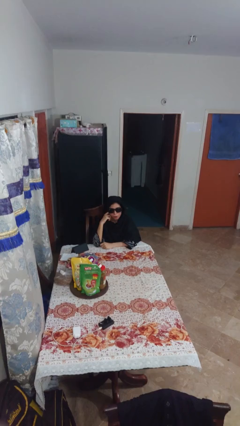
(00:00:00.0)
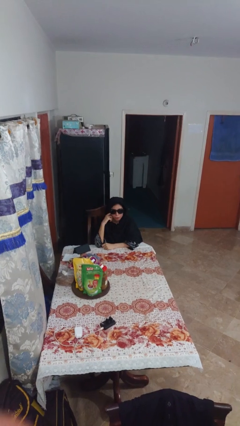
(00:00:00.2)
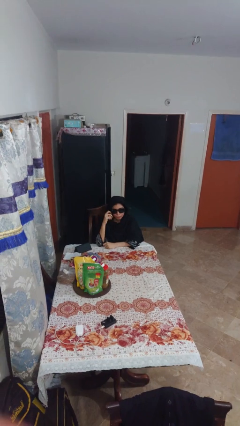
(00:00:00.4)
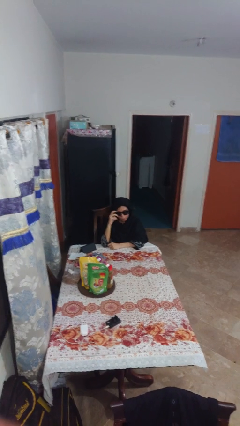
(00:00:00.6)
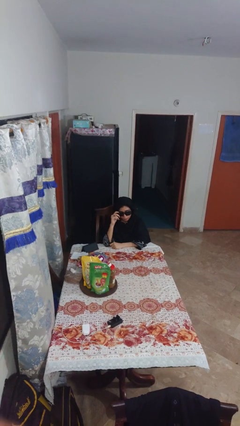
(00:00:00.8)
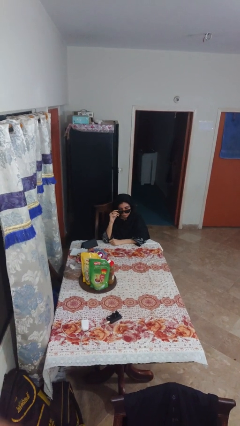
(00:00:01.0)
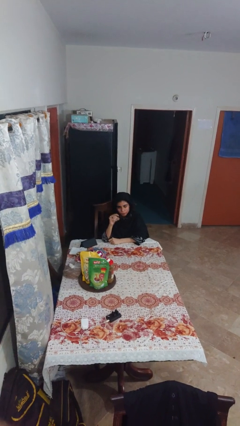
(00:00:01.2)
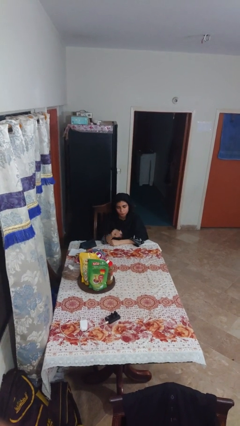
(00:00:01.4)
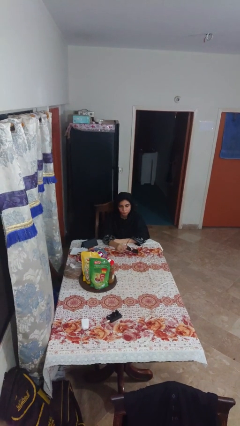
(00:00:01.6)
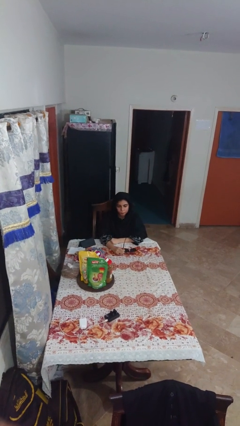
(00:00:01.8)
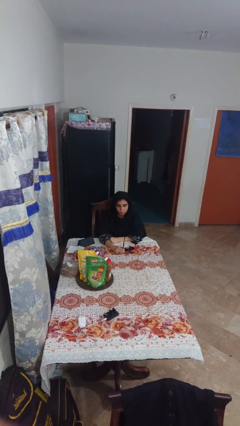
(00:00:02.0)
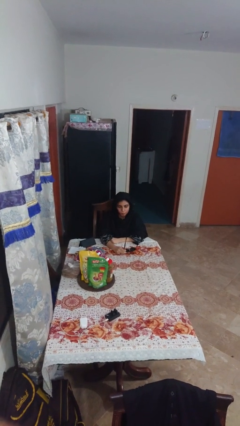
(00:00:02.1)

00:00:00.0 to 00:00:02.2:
person takes off sunglasses

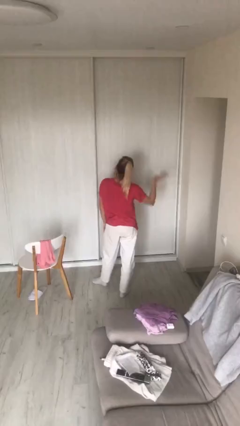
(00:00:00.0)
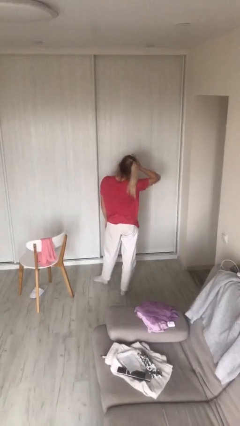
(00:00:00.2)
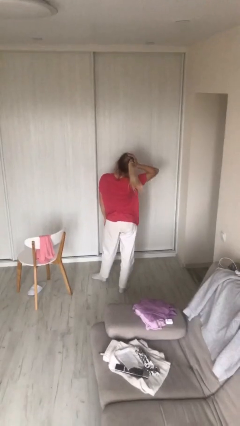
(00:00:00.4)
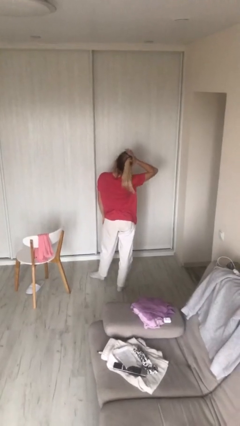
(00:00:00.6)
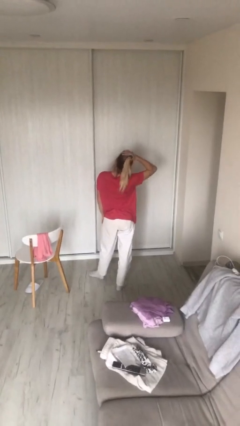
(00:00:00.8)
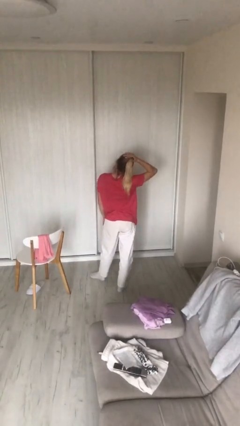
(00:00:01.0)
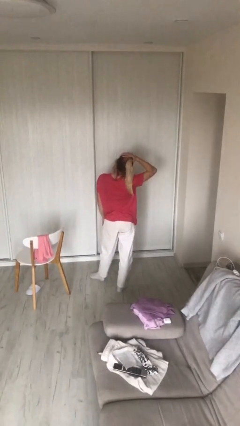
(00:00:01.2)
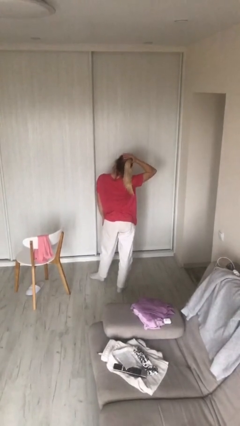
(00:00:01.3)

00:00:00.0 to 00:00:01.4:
person pats head

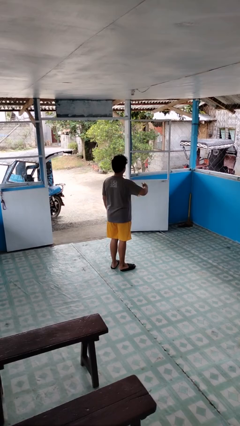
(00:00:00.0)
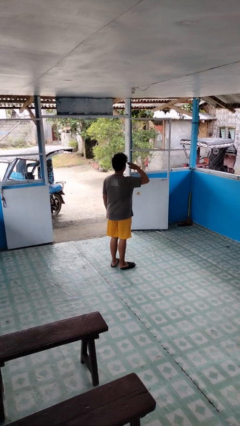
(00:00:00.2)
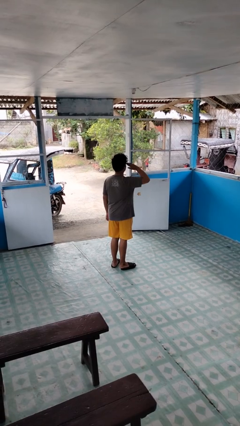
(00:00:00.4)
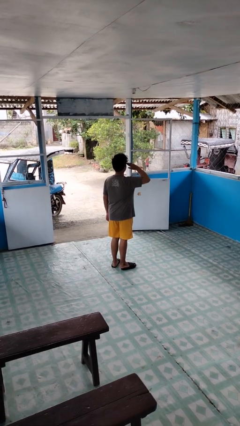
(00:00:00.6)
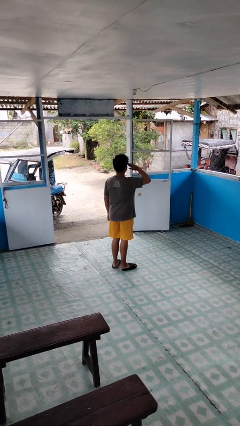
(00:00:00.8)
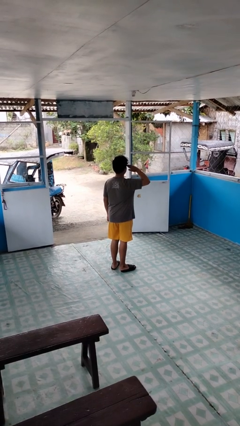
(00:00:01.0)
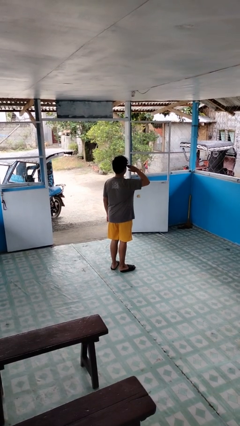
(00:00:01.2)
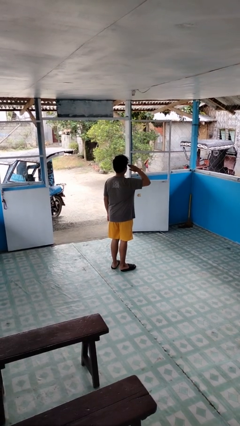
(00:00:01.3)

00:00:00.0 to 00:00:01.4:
person salutes

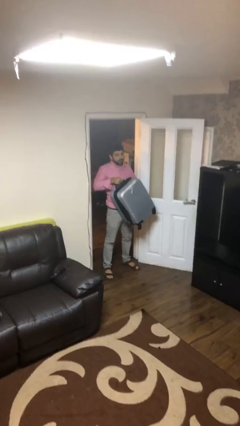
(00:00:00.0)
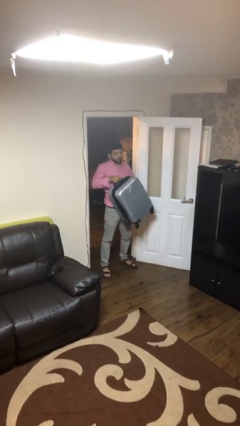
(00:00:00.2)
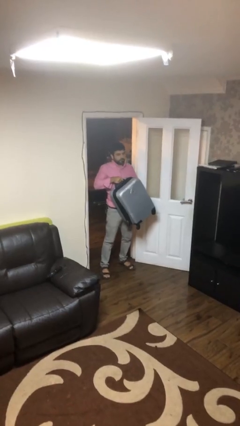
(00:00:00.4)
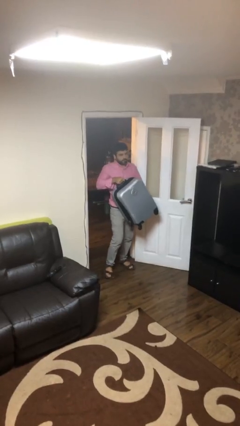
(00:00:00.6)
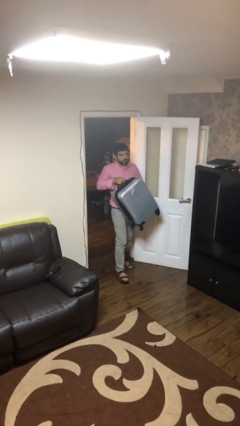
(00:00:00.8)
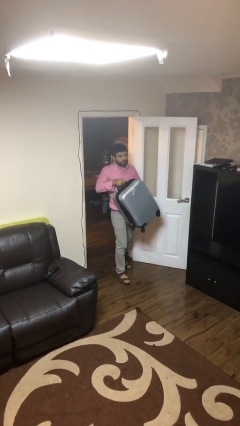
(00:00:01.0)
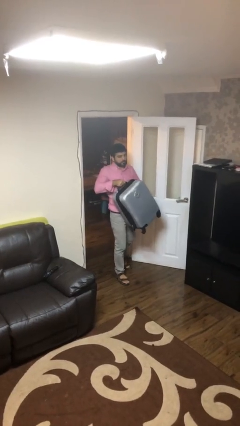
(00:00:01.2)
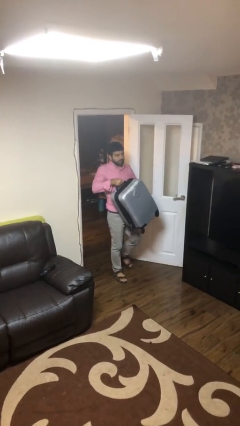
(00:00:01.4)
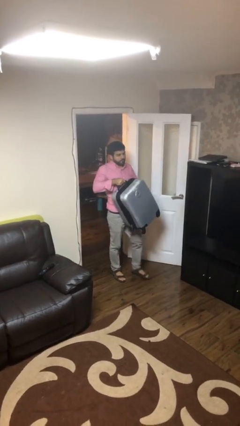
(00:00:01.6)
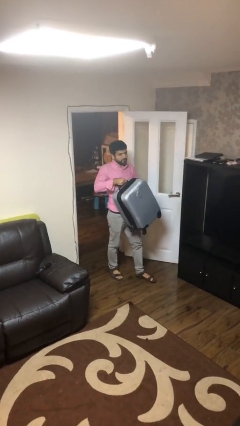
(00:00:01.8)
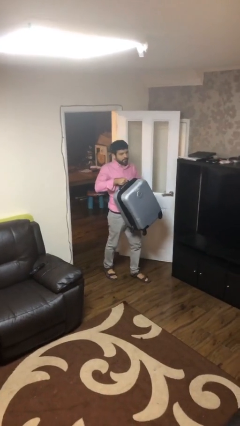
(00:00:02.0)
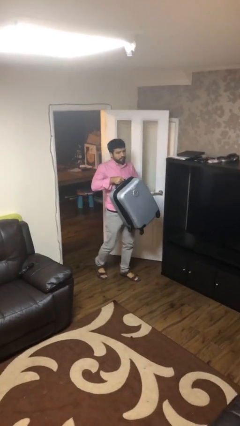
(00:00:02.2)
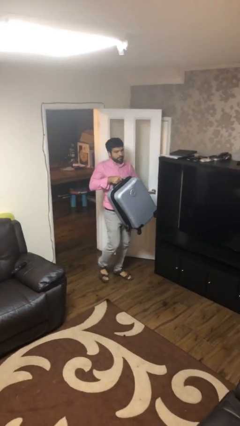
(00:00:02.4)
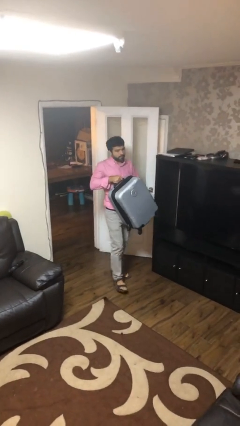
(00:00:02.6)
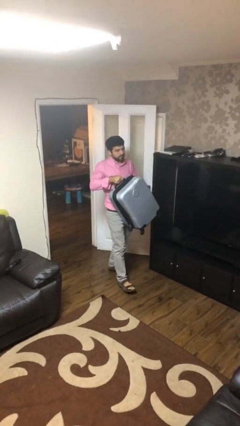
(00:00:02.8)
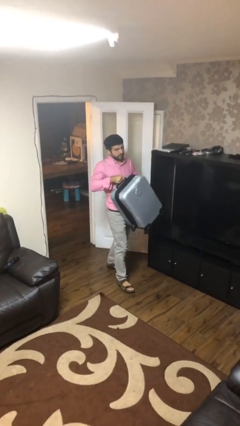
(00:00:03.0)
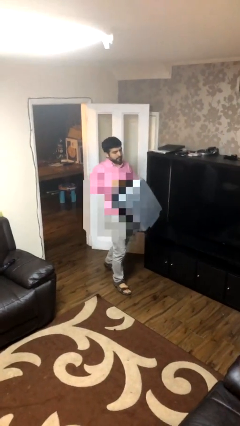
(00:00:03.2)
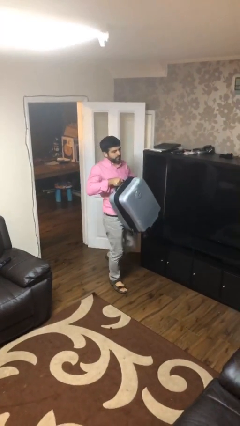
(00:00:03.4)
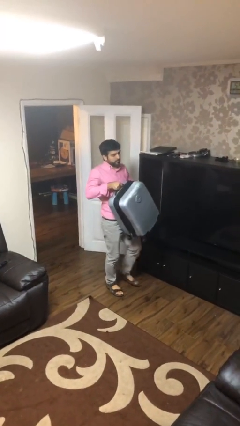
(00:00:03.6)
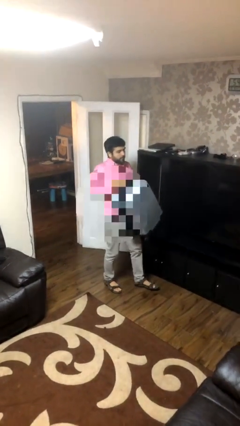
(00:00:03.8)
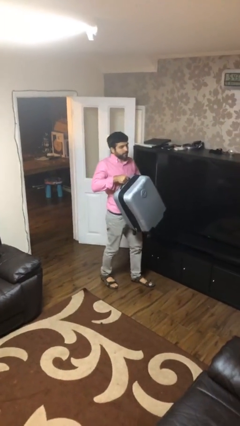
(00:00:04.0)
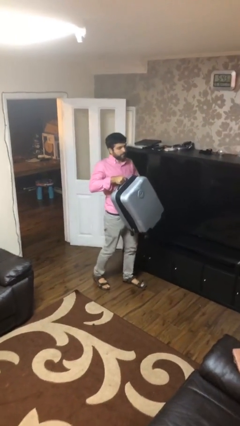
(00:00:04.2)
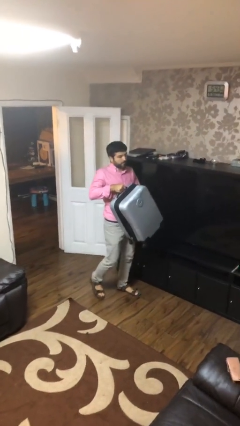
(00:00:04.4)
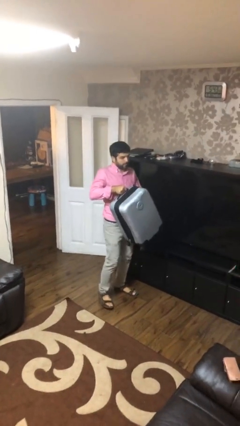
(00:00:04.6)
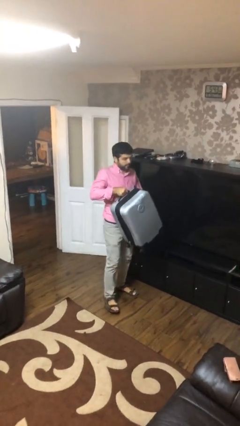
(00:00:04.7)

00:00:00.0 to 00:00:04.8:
person carries heavy object

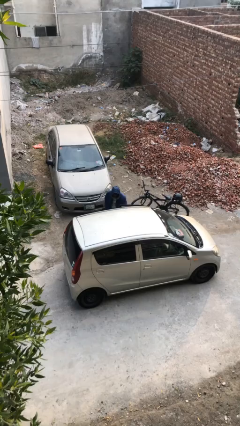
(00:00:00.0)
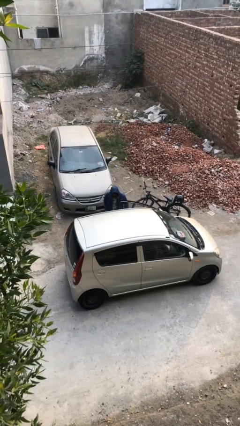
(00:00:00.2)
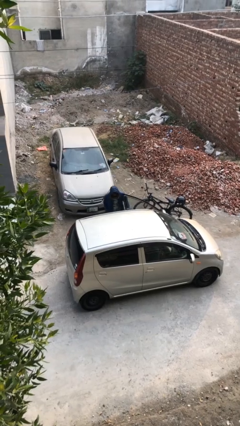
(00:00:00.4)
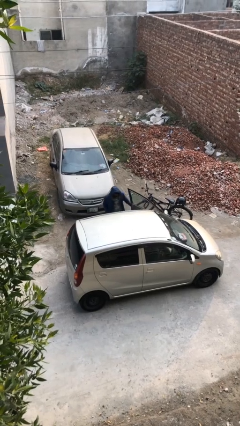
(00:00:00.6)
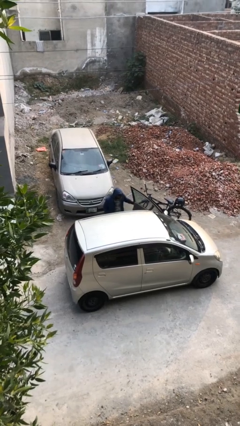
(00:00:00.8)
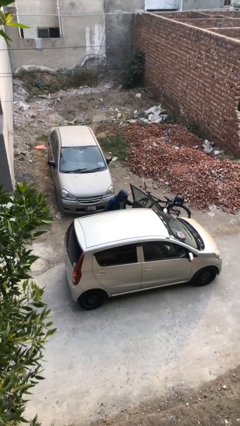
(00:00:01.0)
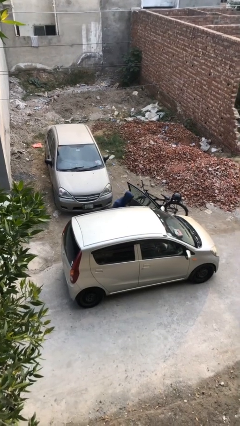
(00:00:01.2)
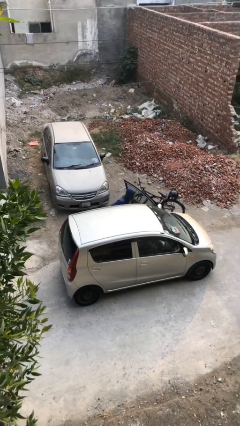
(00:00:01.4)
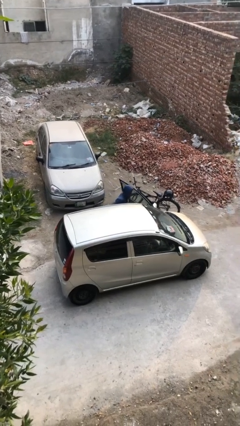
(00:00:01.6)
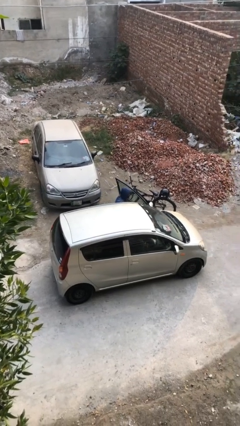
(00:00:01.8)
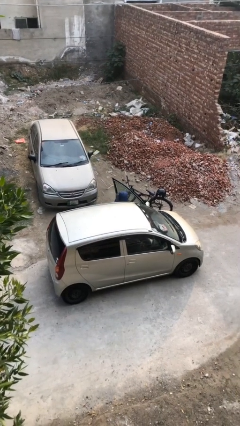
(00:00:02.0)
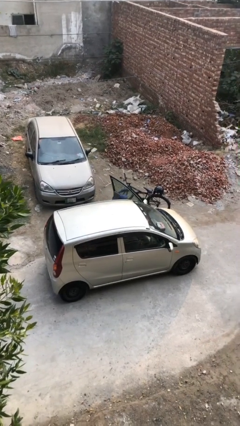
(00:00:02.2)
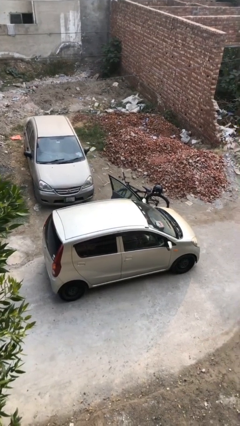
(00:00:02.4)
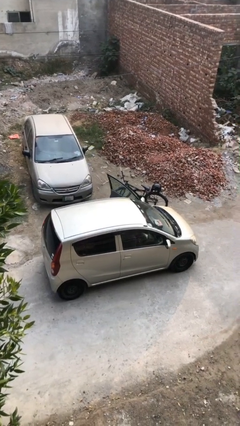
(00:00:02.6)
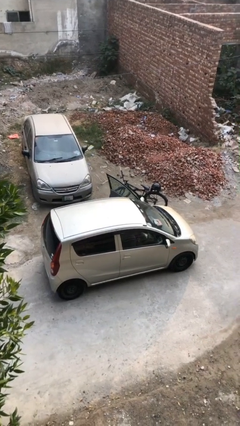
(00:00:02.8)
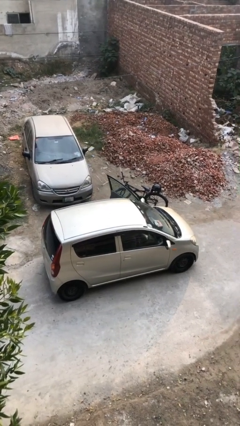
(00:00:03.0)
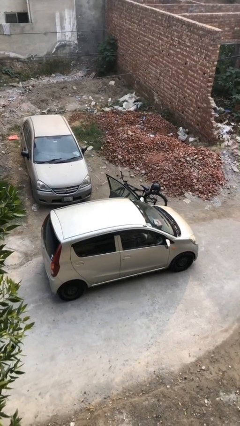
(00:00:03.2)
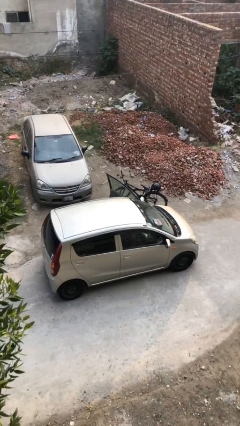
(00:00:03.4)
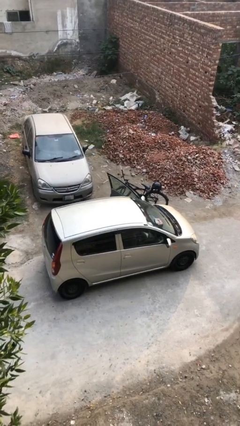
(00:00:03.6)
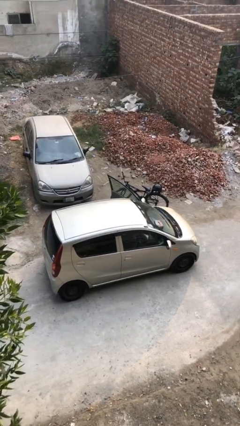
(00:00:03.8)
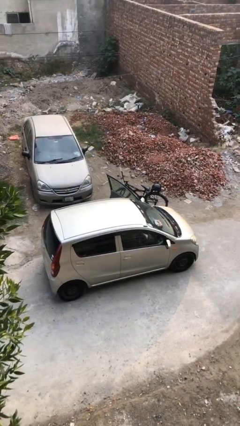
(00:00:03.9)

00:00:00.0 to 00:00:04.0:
person enters car

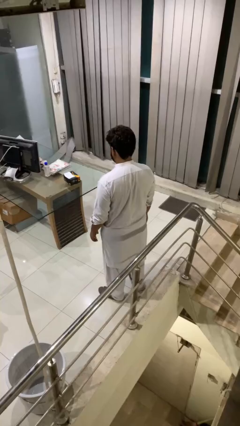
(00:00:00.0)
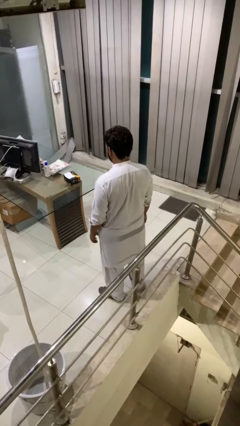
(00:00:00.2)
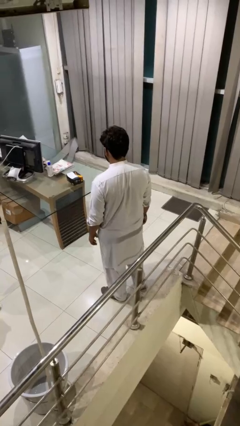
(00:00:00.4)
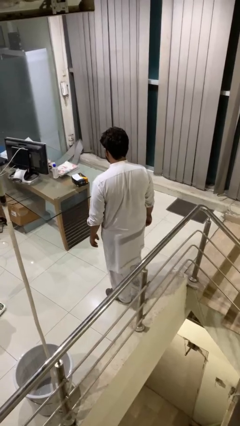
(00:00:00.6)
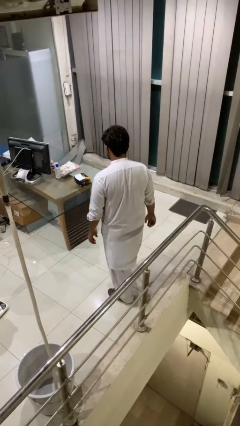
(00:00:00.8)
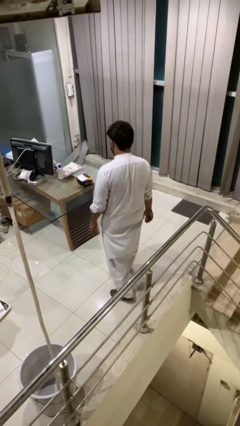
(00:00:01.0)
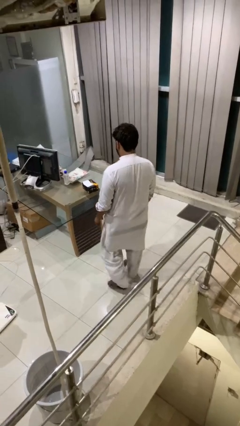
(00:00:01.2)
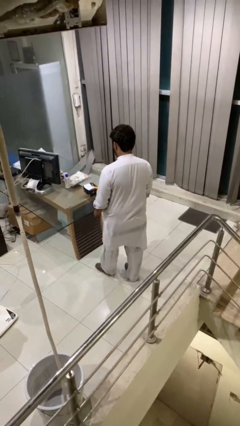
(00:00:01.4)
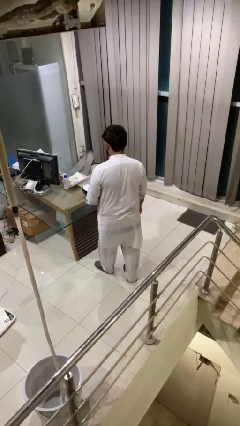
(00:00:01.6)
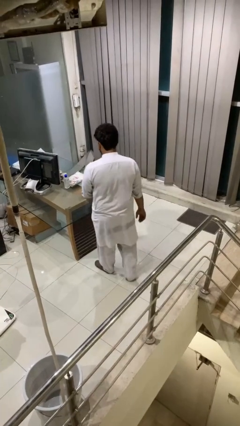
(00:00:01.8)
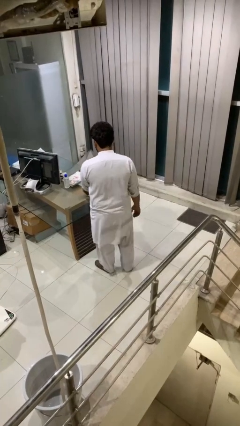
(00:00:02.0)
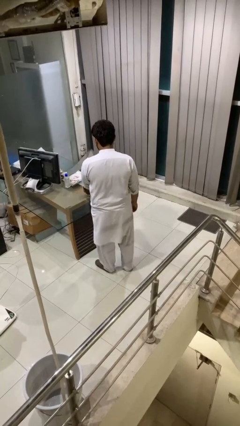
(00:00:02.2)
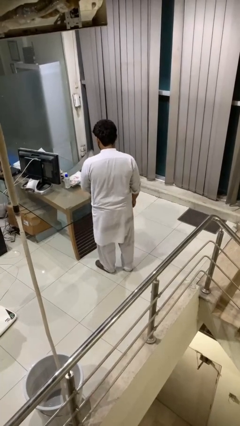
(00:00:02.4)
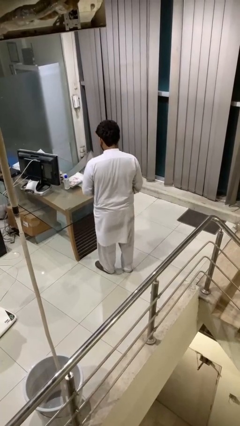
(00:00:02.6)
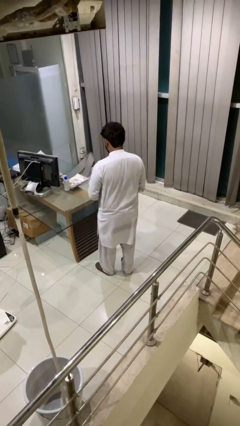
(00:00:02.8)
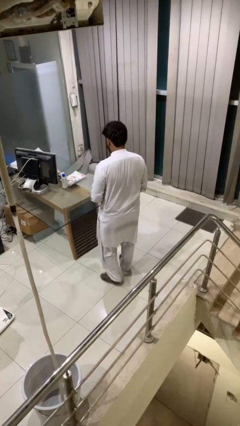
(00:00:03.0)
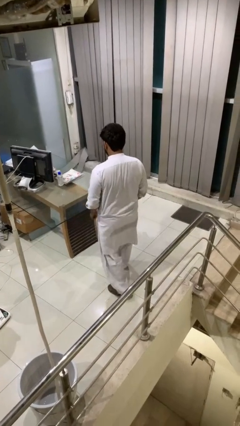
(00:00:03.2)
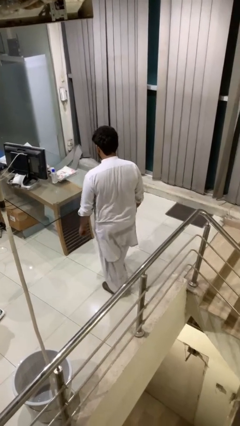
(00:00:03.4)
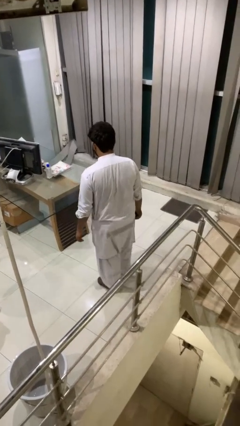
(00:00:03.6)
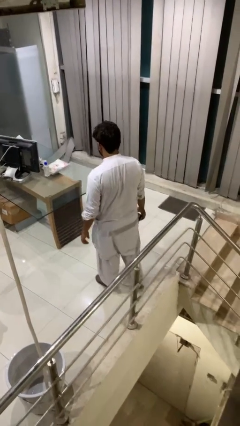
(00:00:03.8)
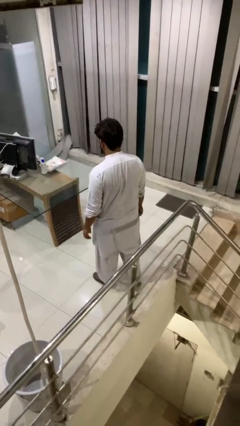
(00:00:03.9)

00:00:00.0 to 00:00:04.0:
person picks up object from table
